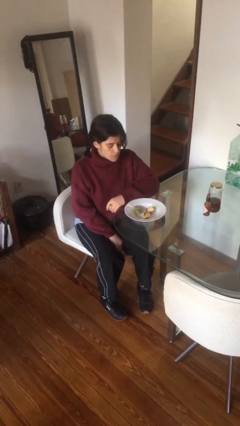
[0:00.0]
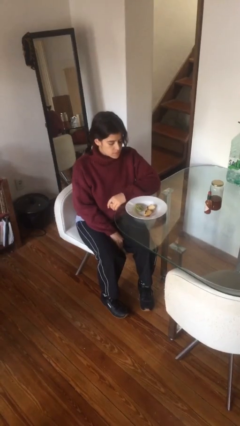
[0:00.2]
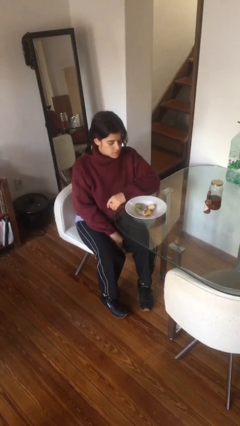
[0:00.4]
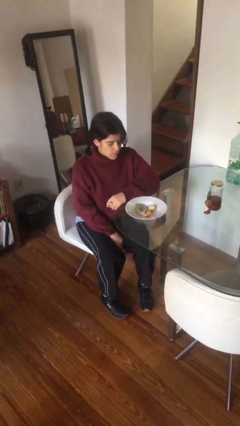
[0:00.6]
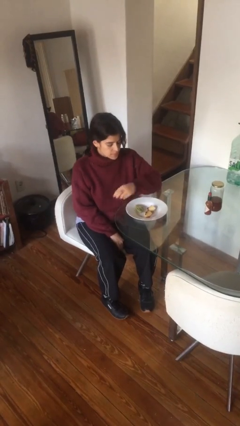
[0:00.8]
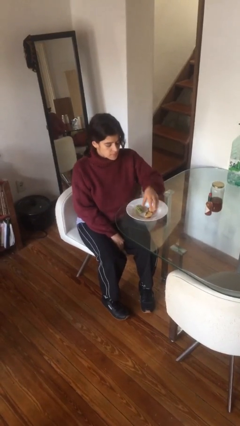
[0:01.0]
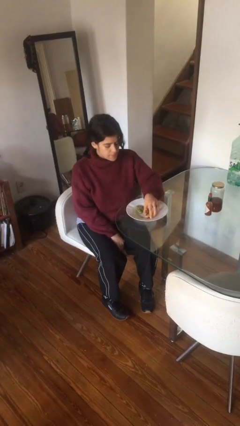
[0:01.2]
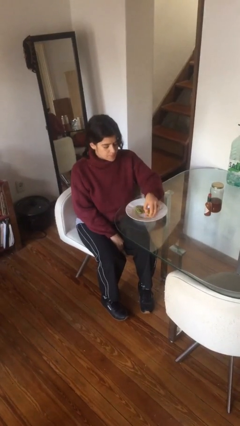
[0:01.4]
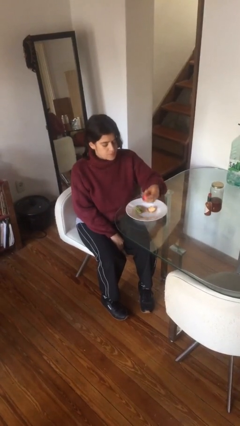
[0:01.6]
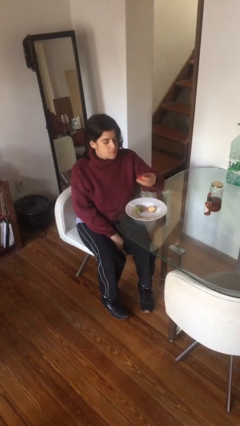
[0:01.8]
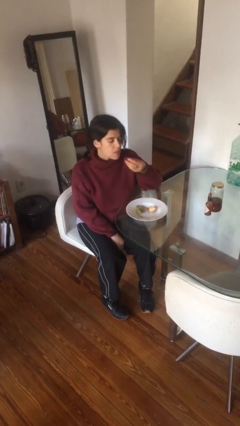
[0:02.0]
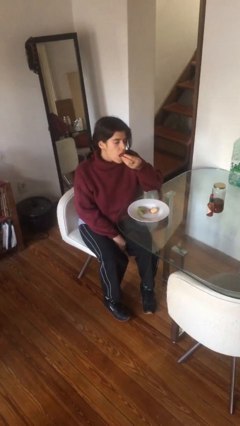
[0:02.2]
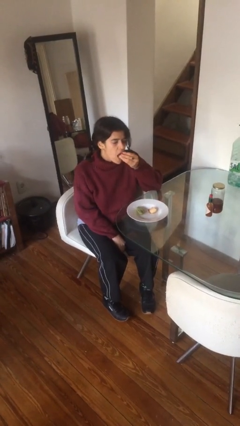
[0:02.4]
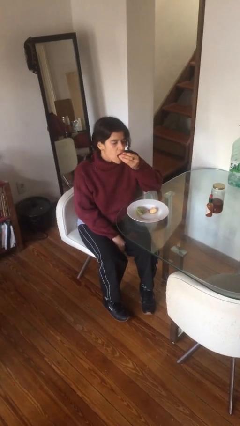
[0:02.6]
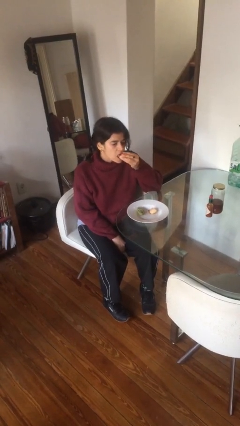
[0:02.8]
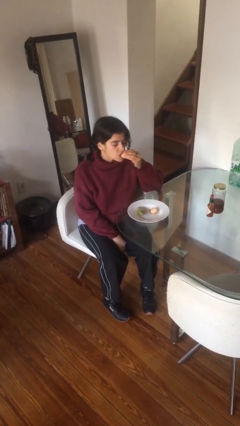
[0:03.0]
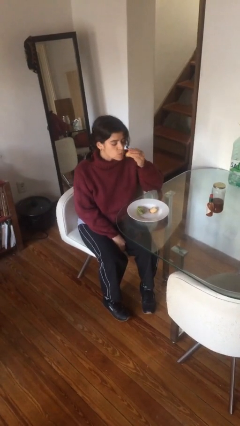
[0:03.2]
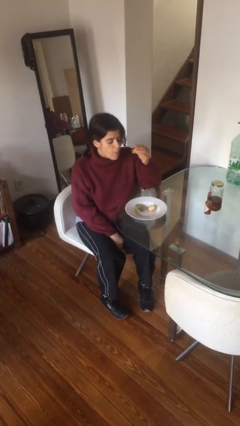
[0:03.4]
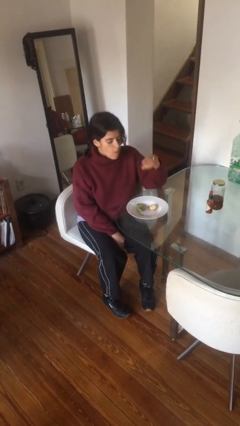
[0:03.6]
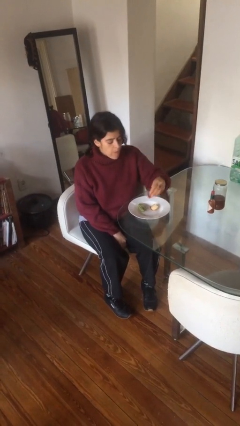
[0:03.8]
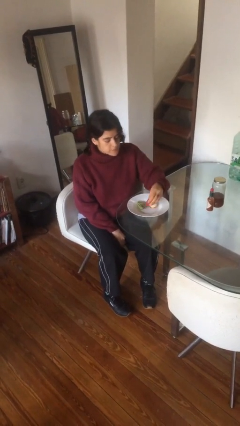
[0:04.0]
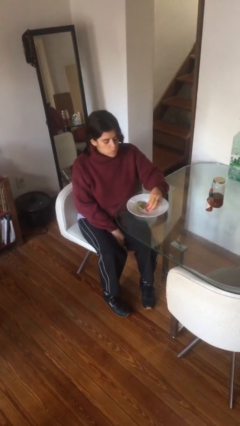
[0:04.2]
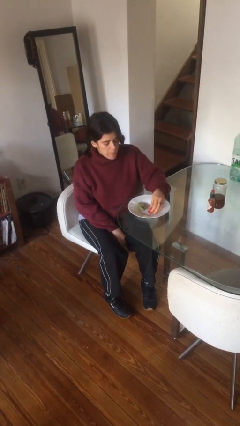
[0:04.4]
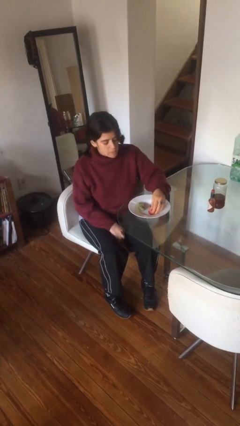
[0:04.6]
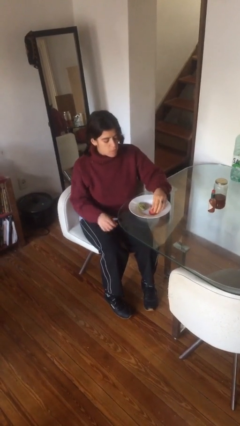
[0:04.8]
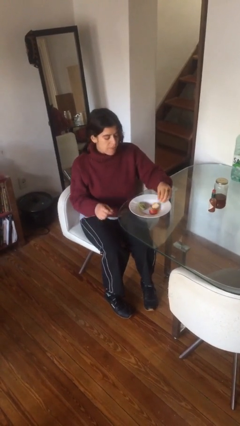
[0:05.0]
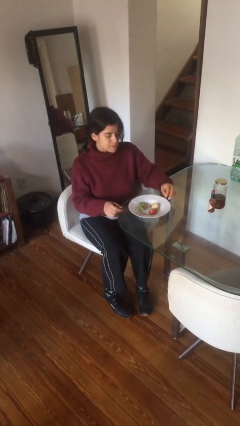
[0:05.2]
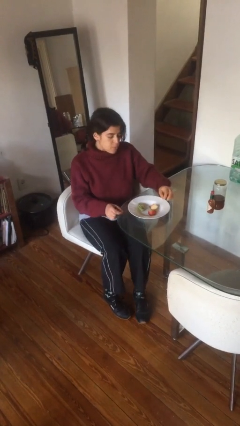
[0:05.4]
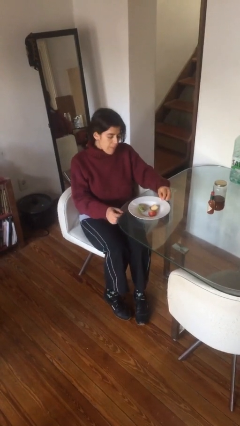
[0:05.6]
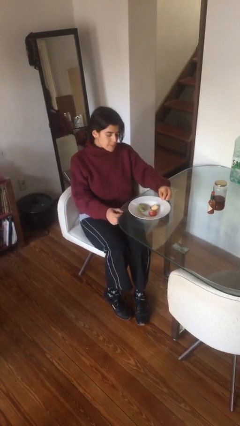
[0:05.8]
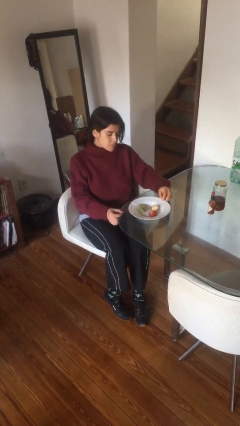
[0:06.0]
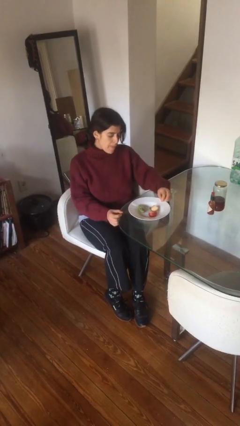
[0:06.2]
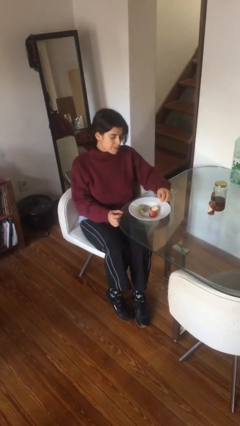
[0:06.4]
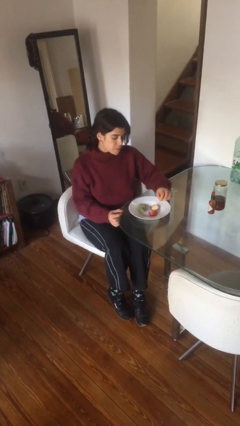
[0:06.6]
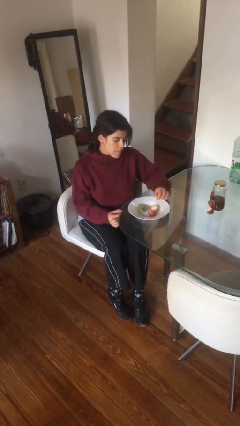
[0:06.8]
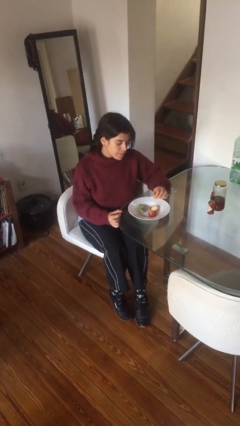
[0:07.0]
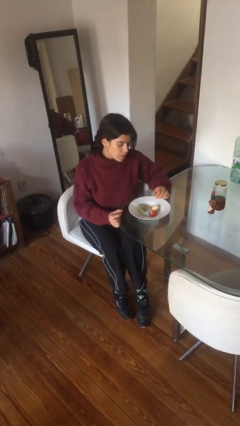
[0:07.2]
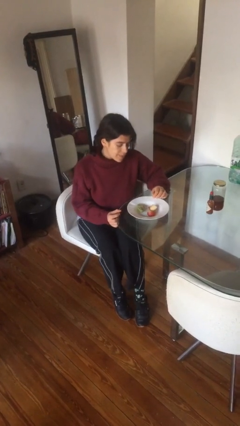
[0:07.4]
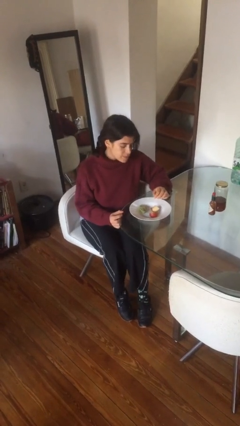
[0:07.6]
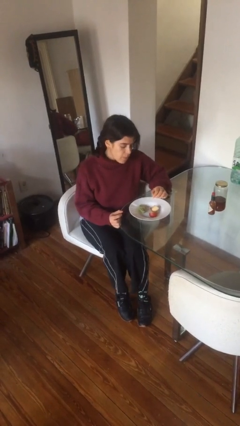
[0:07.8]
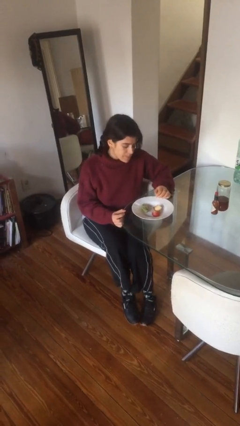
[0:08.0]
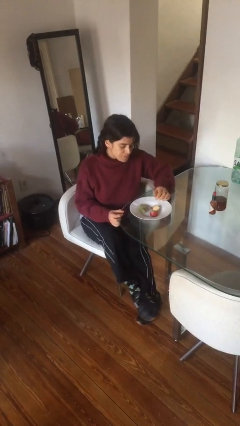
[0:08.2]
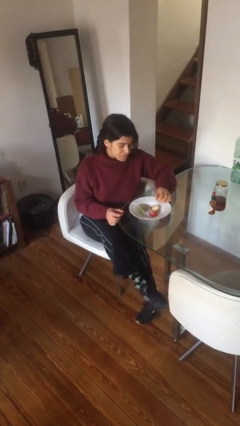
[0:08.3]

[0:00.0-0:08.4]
person eats with hands

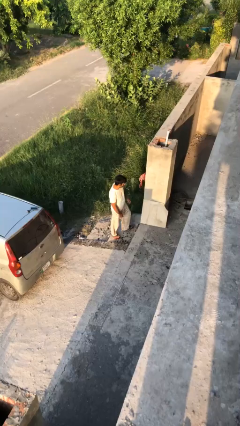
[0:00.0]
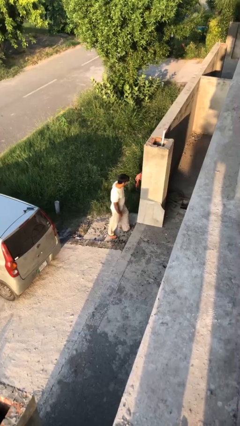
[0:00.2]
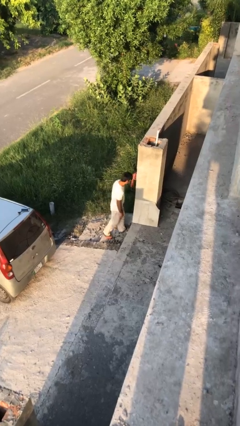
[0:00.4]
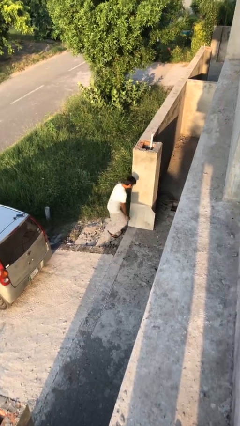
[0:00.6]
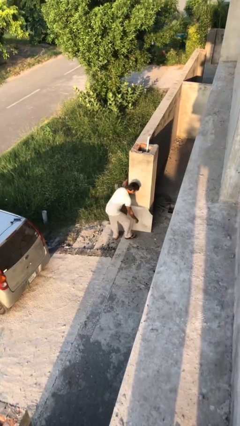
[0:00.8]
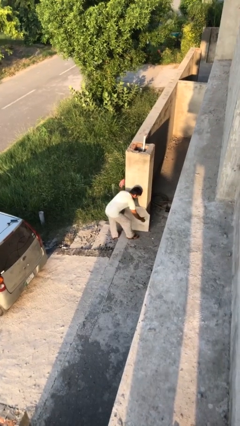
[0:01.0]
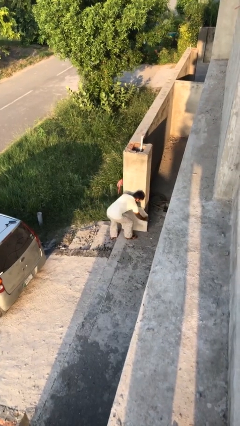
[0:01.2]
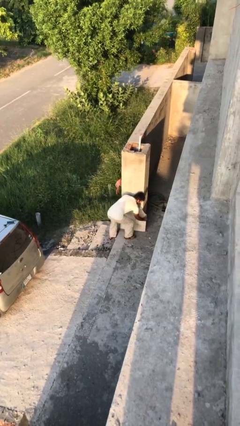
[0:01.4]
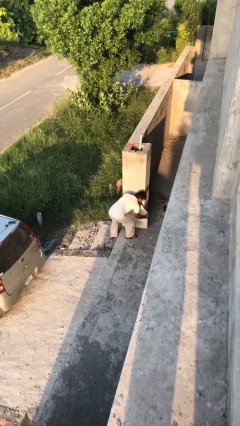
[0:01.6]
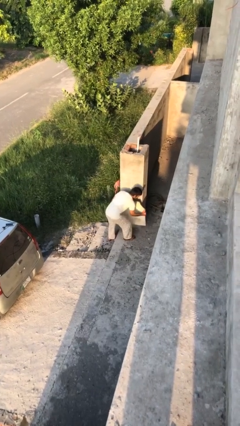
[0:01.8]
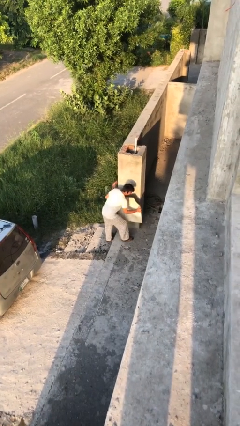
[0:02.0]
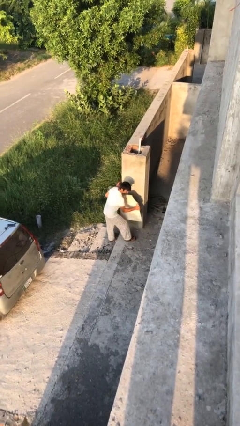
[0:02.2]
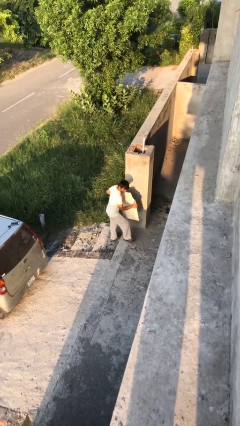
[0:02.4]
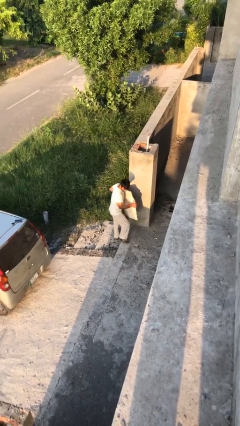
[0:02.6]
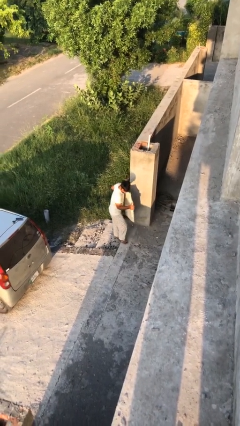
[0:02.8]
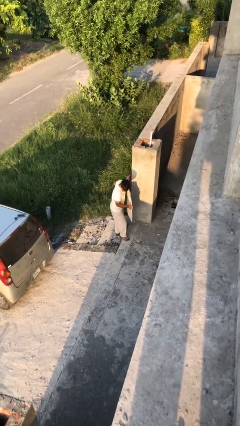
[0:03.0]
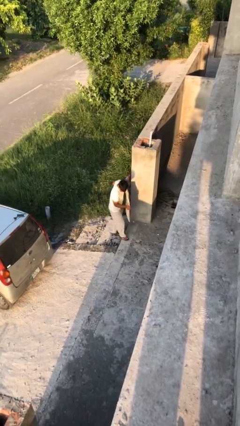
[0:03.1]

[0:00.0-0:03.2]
person picks up object from floor

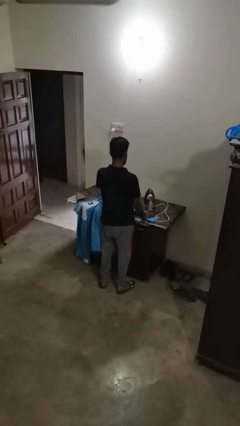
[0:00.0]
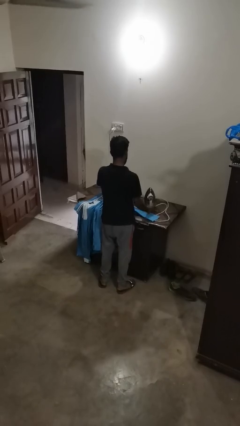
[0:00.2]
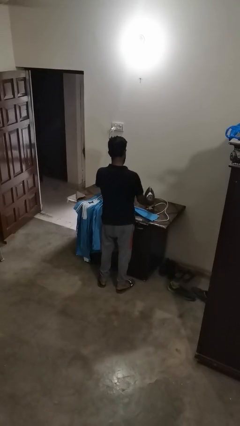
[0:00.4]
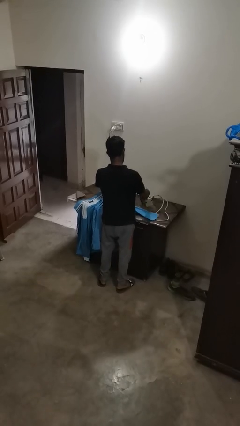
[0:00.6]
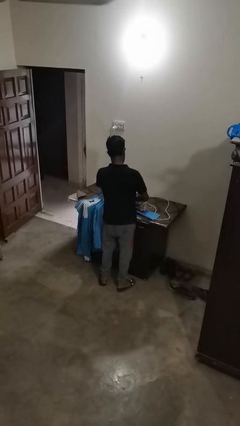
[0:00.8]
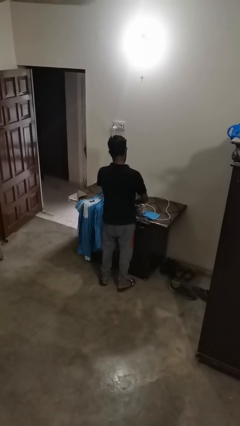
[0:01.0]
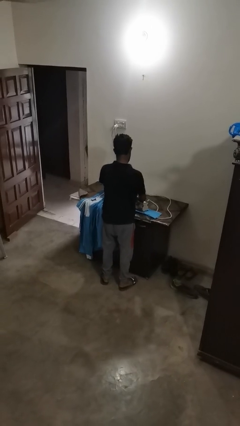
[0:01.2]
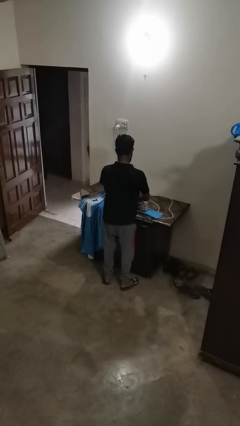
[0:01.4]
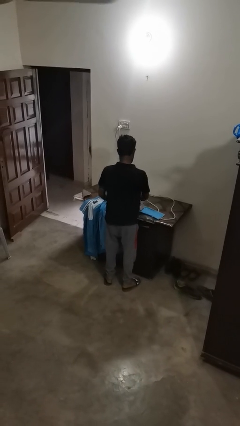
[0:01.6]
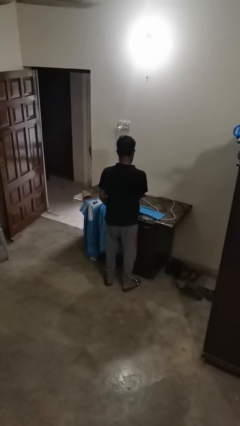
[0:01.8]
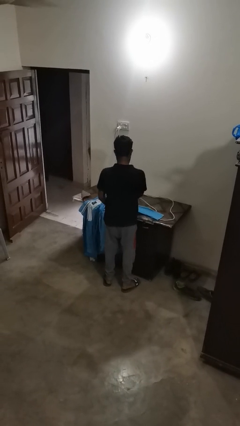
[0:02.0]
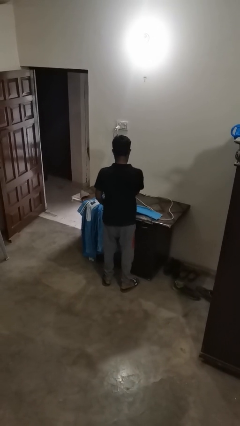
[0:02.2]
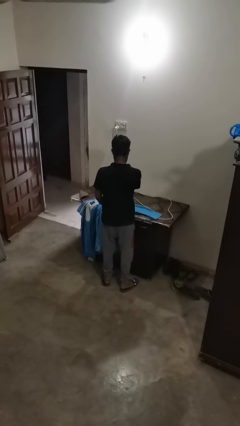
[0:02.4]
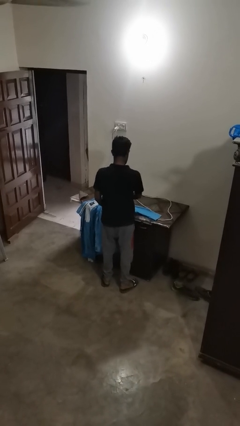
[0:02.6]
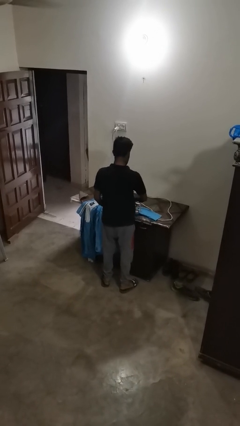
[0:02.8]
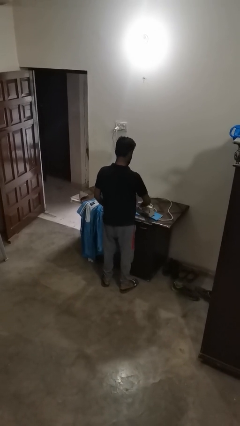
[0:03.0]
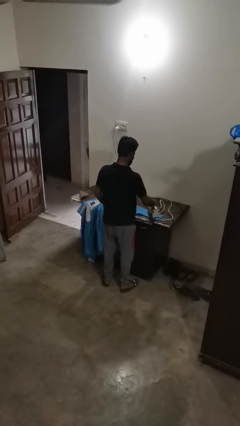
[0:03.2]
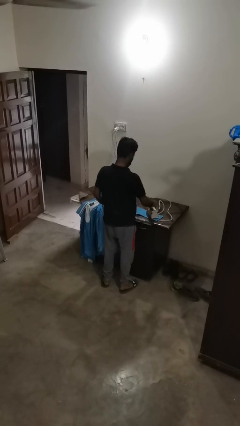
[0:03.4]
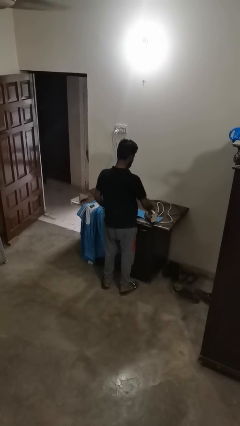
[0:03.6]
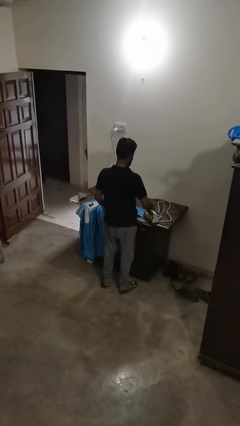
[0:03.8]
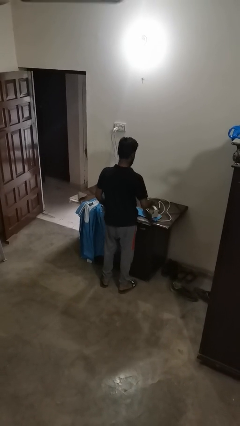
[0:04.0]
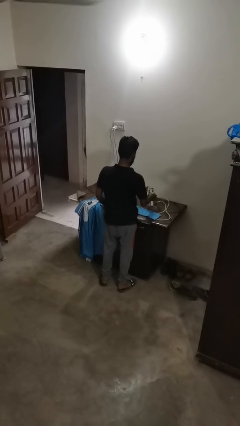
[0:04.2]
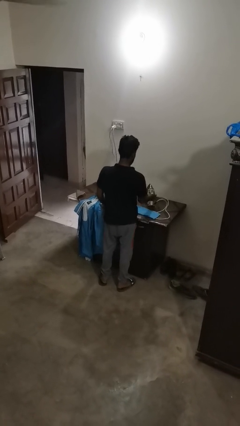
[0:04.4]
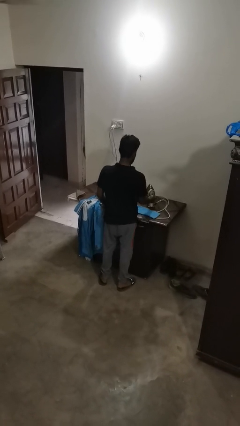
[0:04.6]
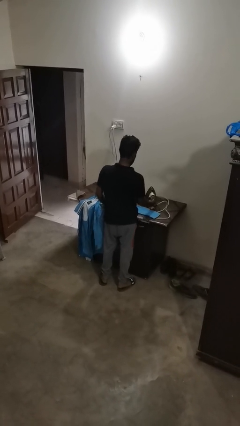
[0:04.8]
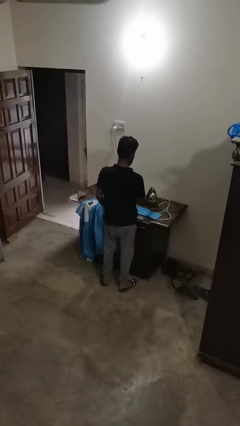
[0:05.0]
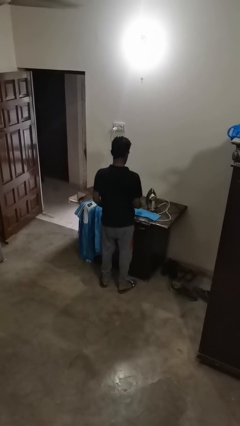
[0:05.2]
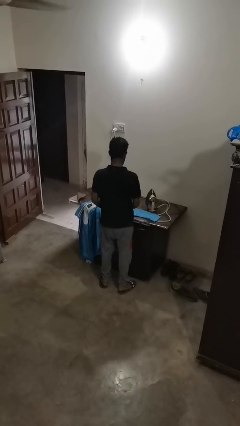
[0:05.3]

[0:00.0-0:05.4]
person irons clothes

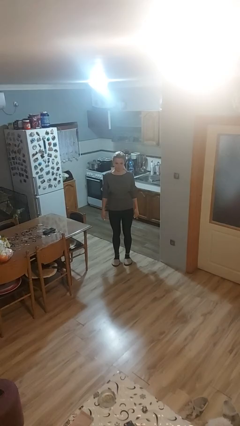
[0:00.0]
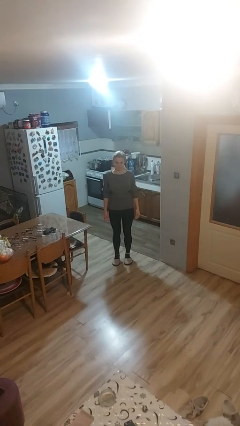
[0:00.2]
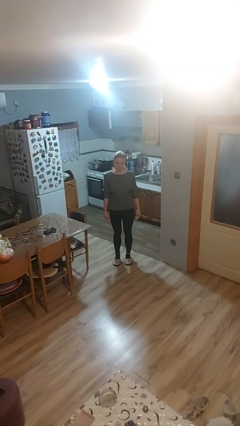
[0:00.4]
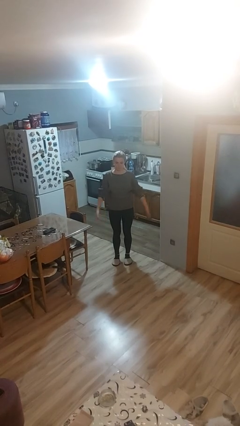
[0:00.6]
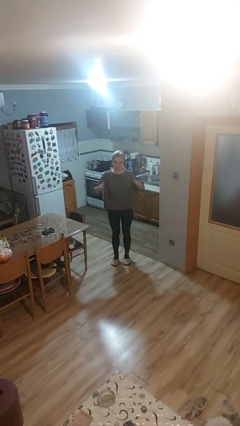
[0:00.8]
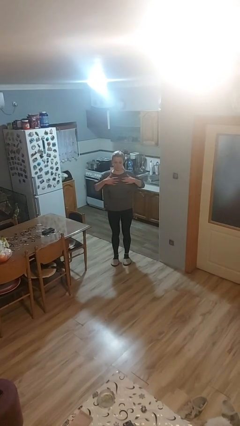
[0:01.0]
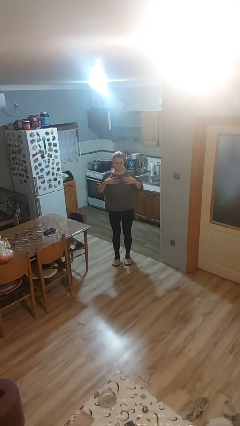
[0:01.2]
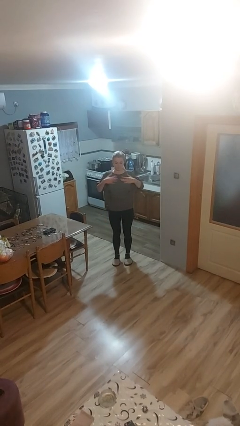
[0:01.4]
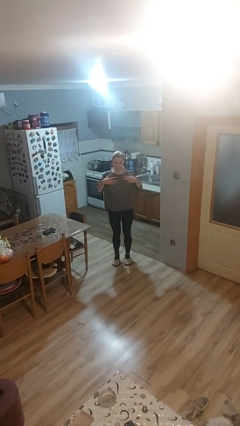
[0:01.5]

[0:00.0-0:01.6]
person drums on chest
